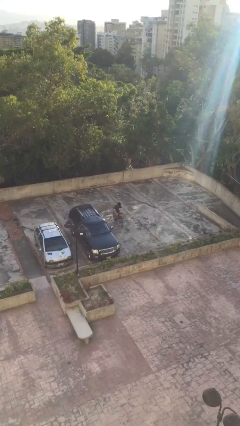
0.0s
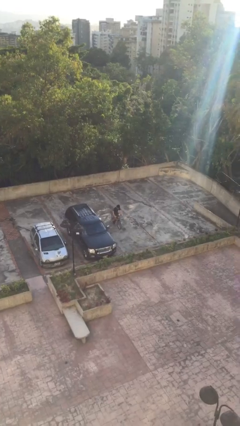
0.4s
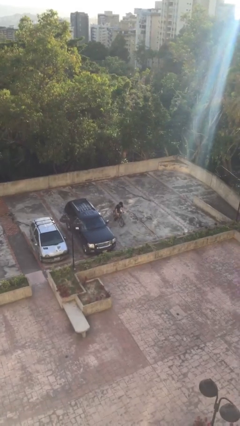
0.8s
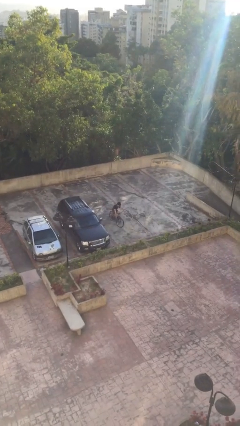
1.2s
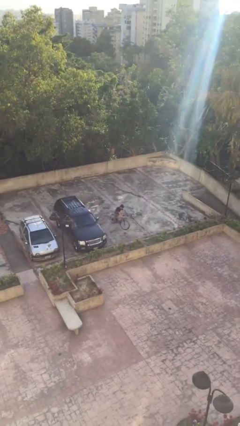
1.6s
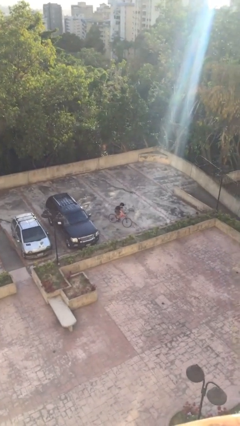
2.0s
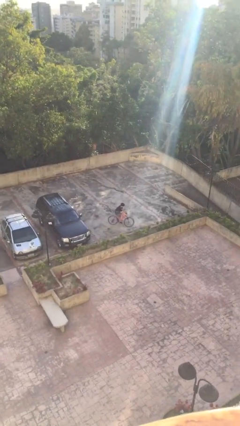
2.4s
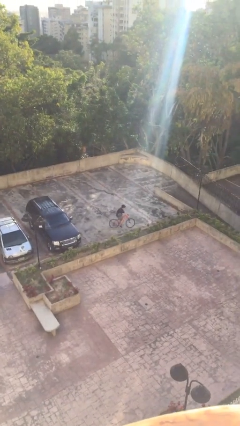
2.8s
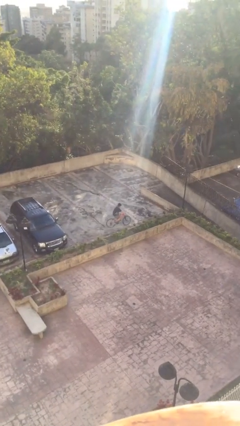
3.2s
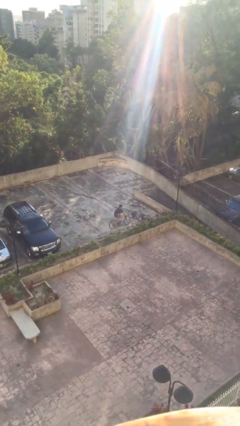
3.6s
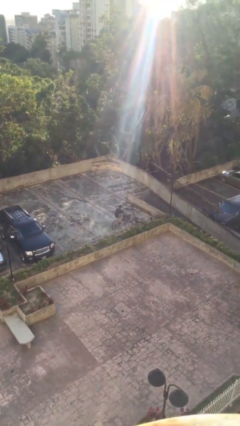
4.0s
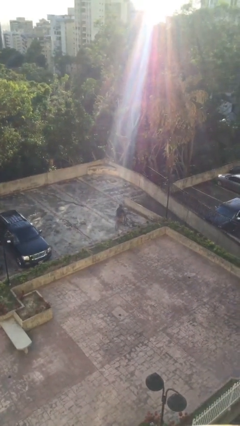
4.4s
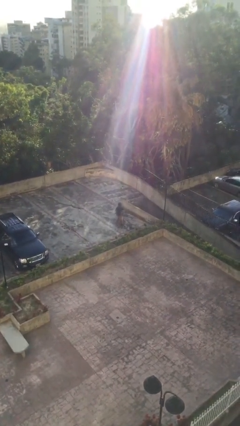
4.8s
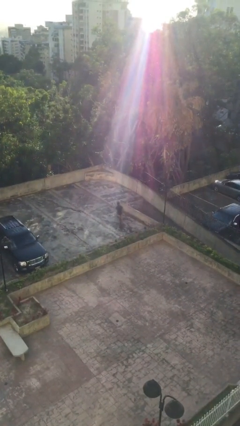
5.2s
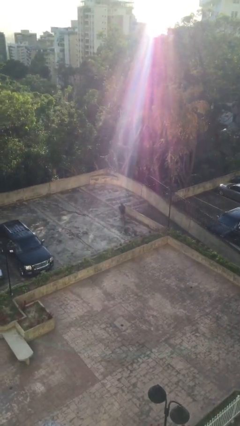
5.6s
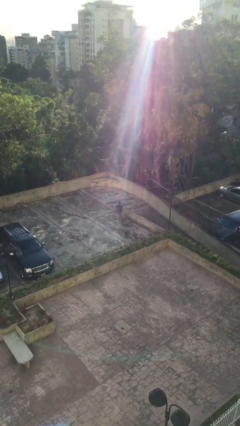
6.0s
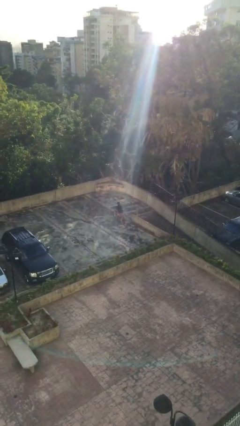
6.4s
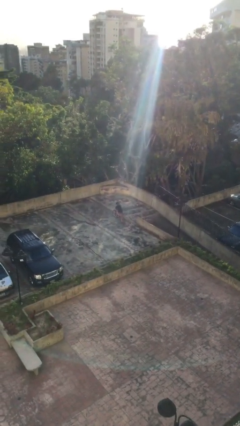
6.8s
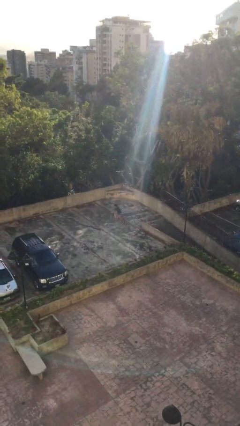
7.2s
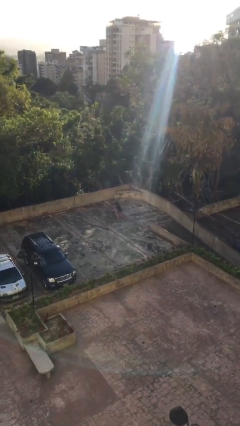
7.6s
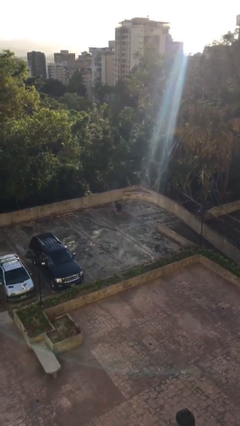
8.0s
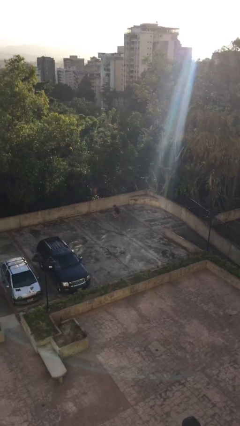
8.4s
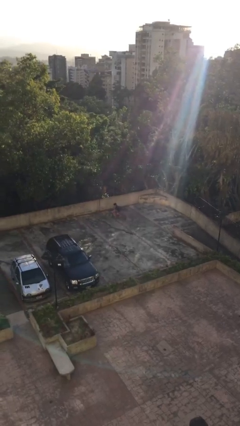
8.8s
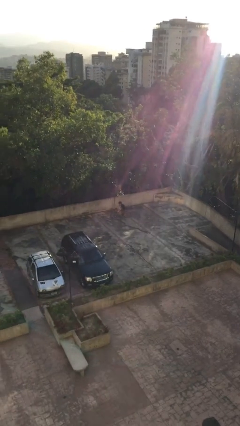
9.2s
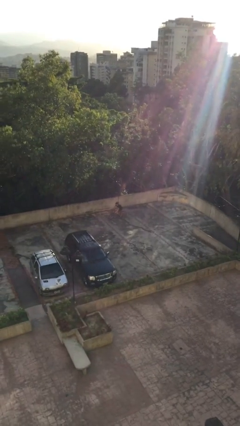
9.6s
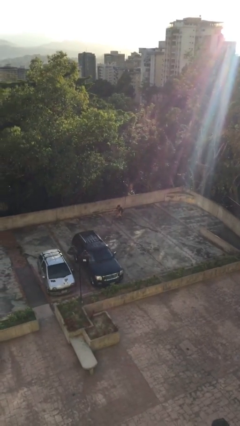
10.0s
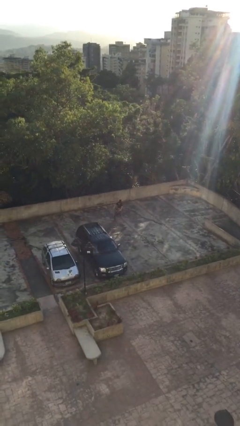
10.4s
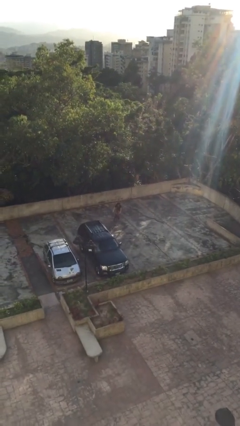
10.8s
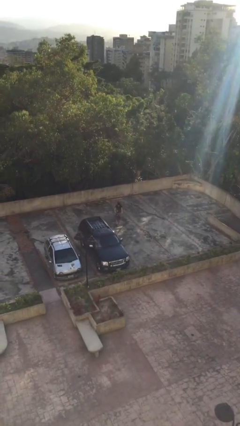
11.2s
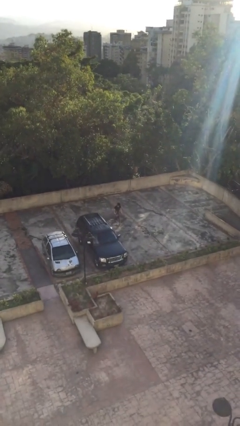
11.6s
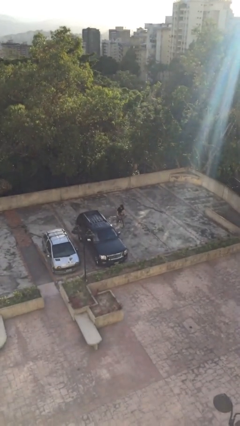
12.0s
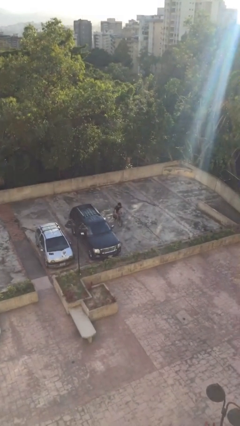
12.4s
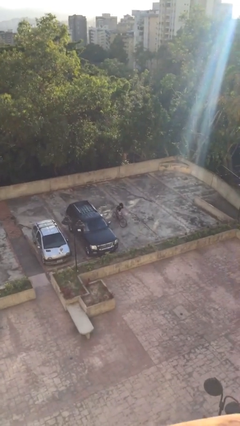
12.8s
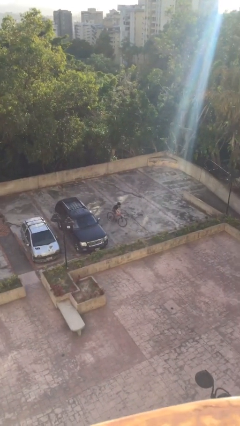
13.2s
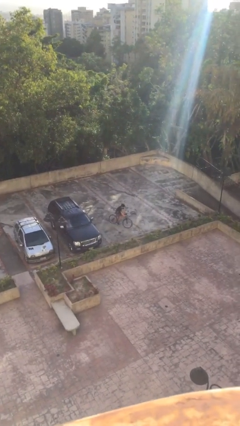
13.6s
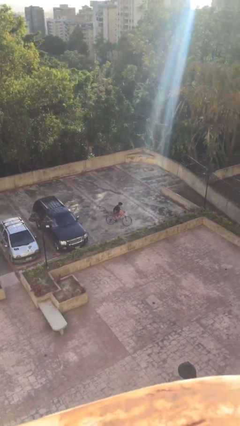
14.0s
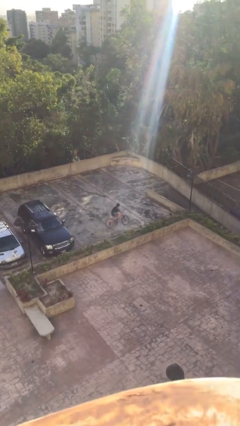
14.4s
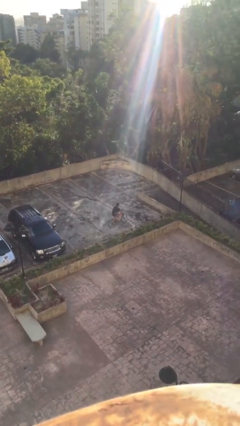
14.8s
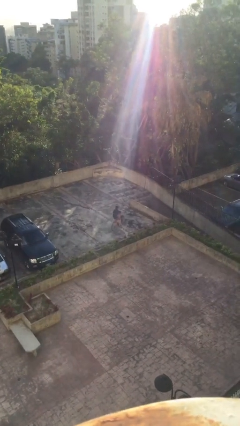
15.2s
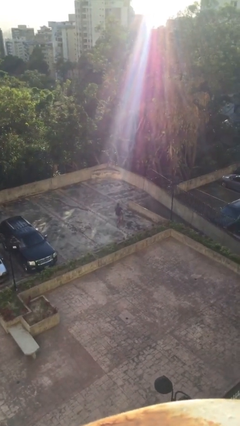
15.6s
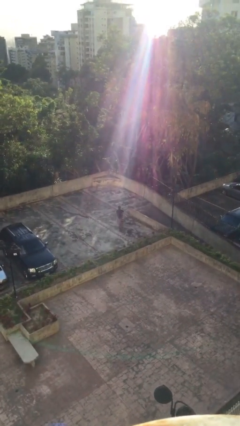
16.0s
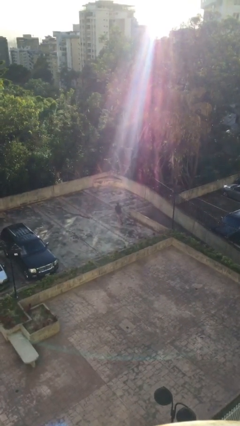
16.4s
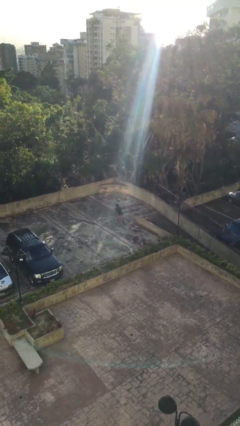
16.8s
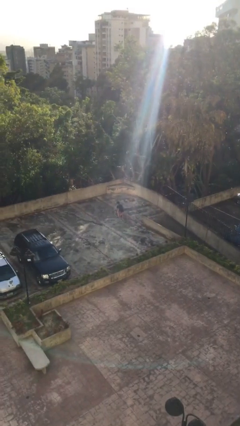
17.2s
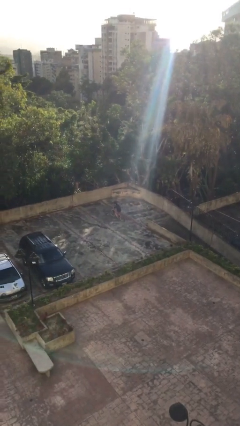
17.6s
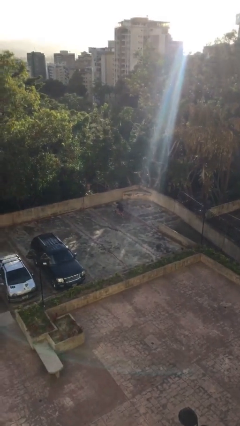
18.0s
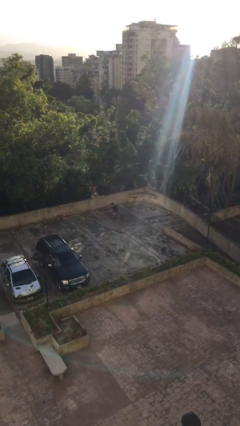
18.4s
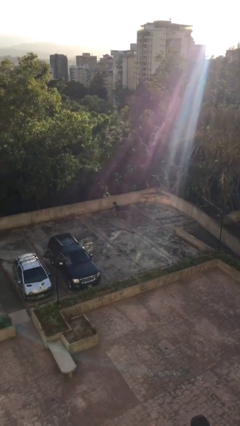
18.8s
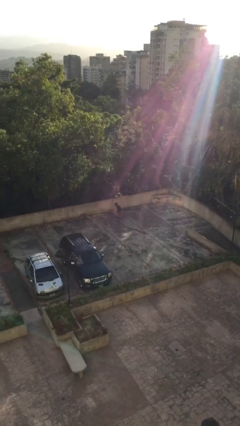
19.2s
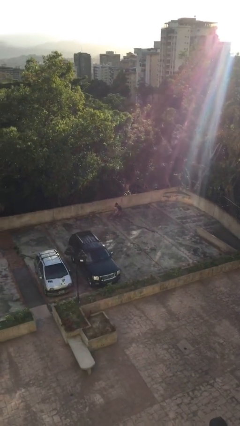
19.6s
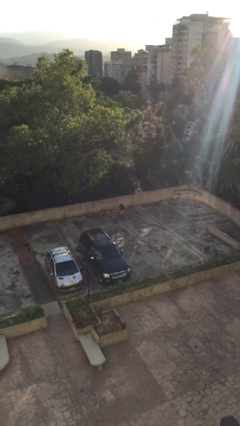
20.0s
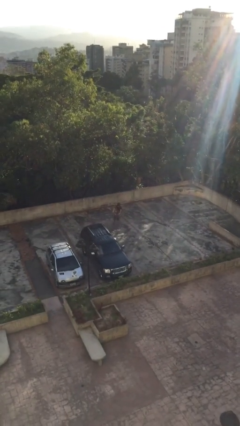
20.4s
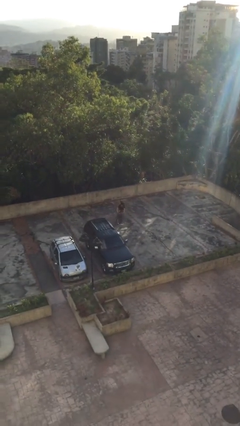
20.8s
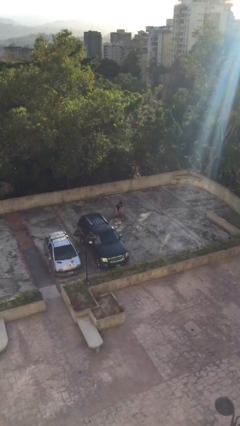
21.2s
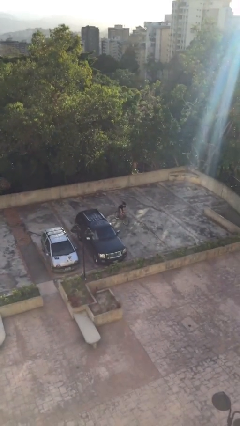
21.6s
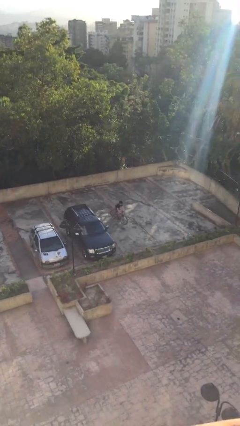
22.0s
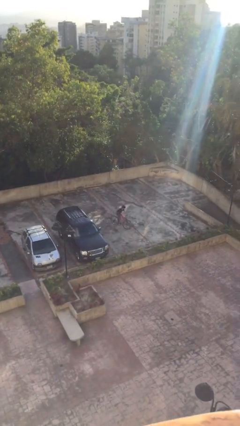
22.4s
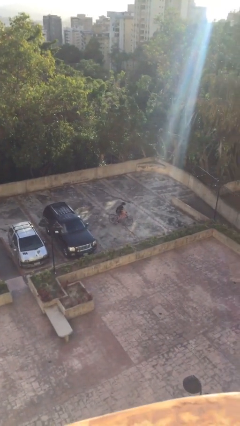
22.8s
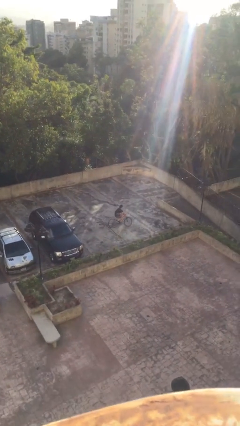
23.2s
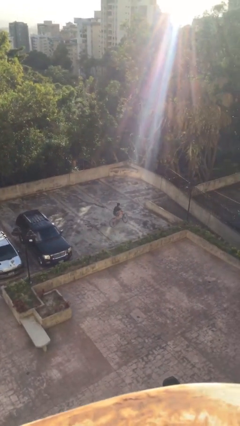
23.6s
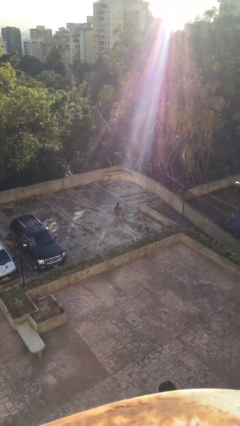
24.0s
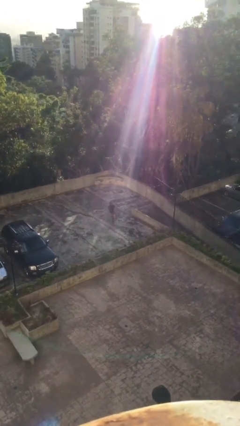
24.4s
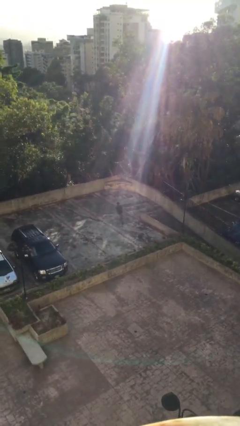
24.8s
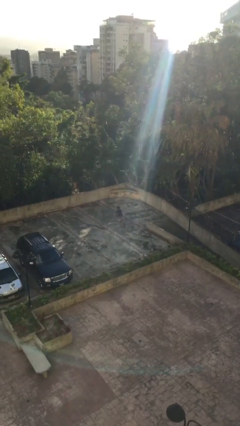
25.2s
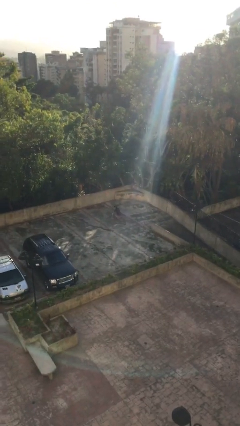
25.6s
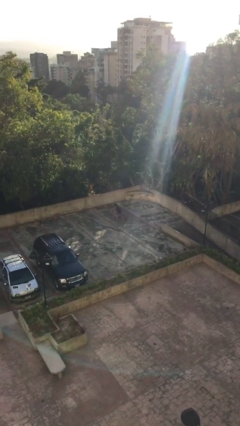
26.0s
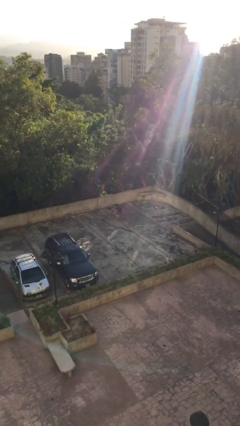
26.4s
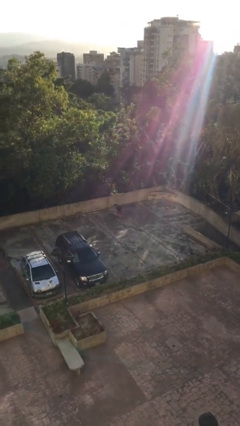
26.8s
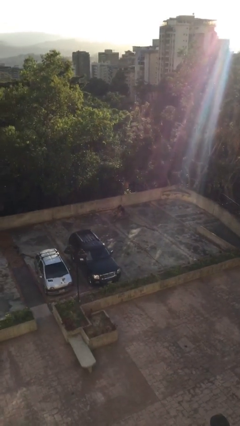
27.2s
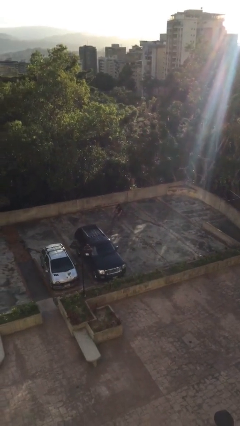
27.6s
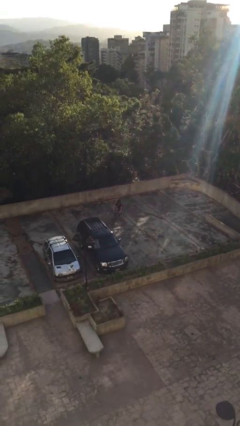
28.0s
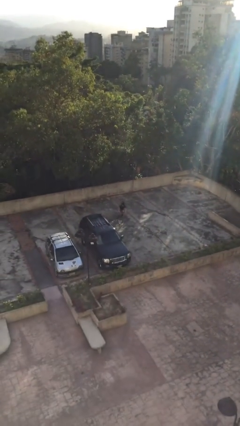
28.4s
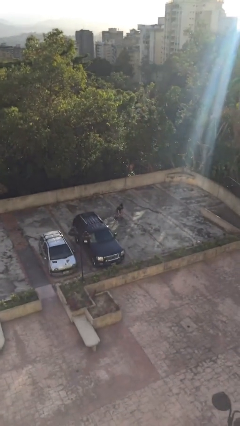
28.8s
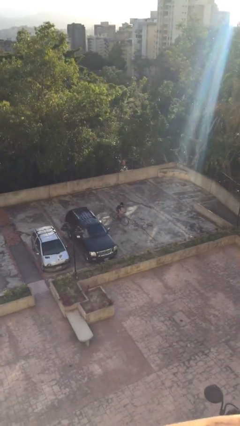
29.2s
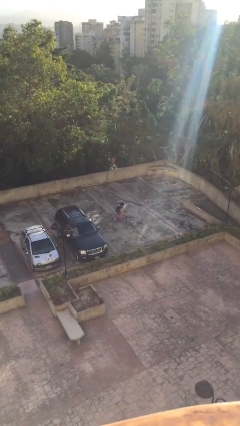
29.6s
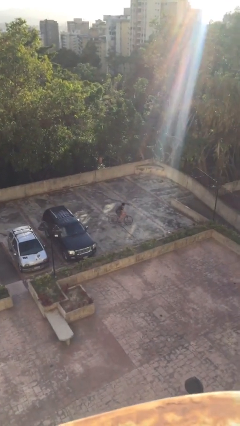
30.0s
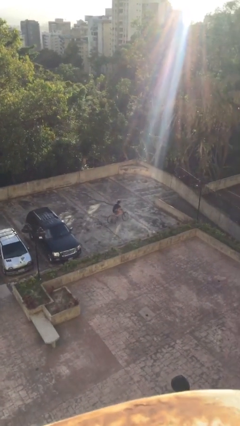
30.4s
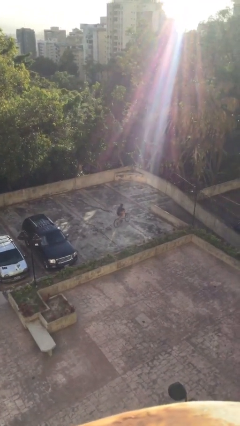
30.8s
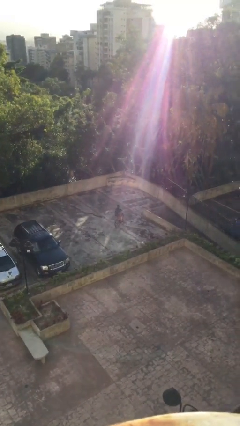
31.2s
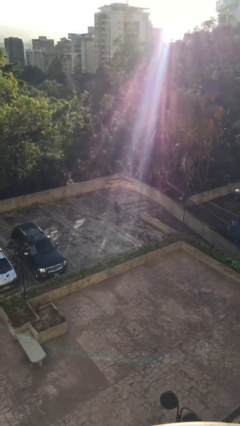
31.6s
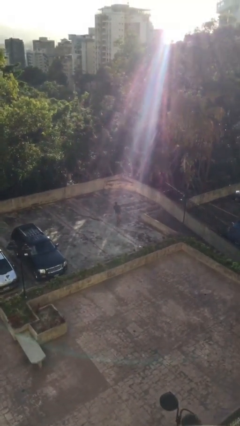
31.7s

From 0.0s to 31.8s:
person rides bicycle

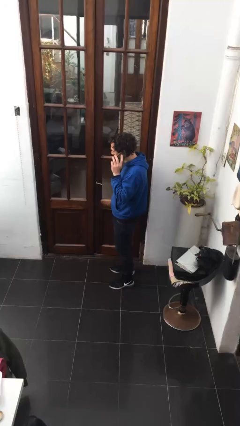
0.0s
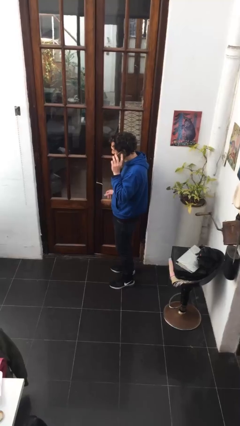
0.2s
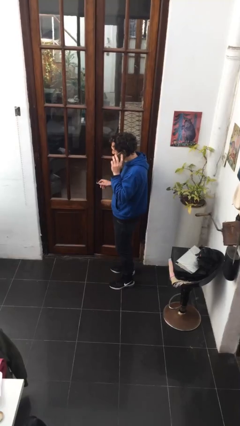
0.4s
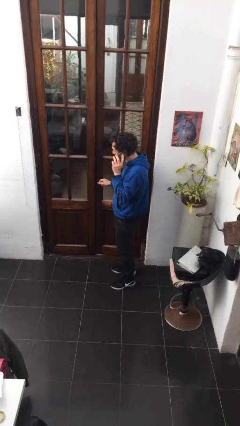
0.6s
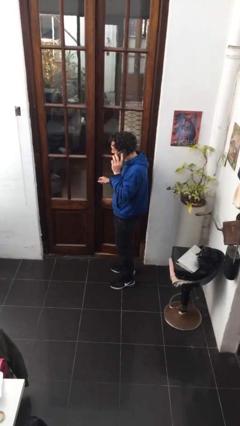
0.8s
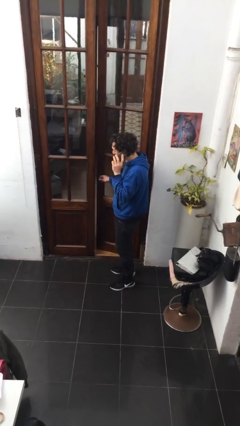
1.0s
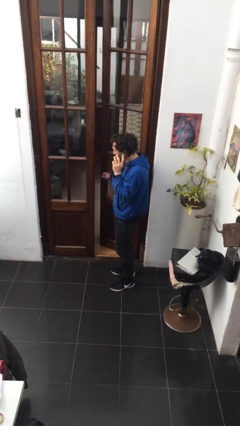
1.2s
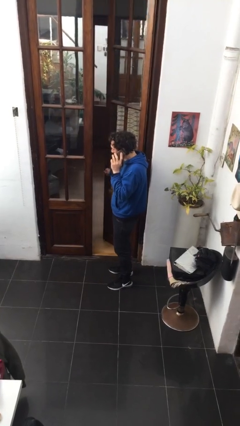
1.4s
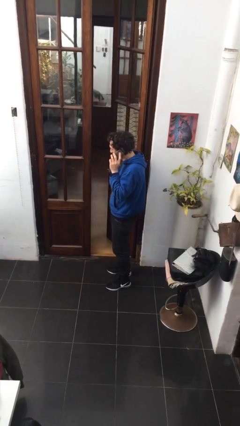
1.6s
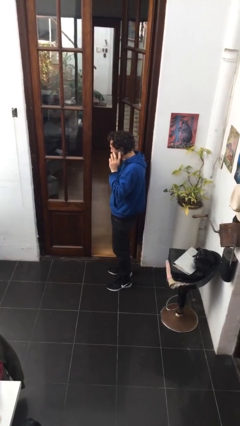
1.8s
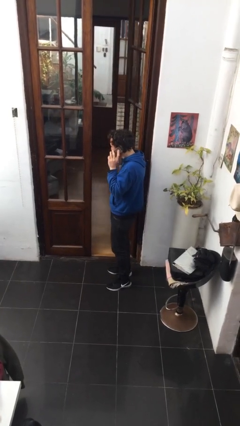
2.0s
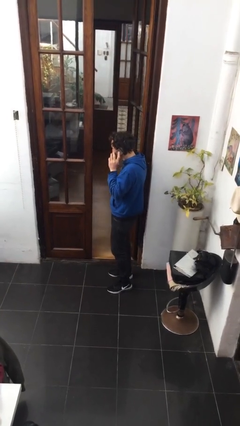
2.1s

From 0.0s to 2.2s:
person opens facility door
